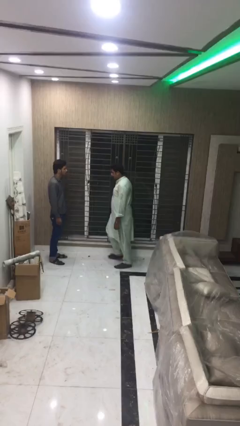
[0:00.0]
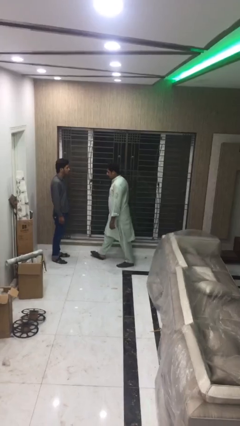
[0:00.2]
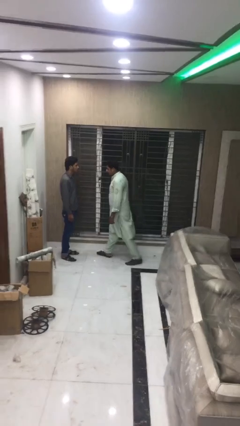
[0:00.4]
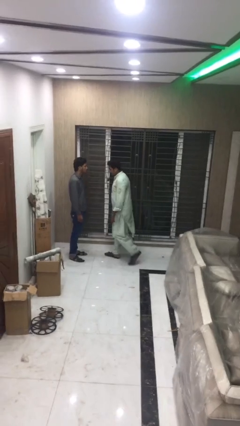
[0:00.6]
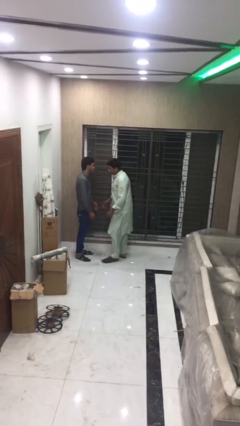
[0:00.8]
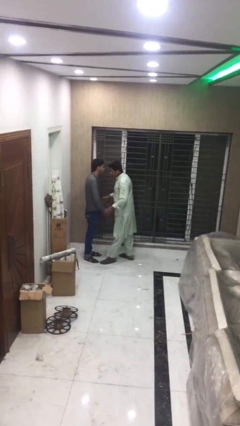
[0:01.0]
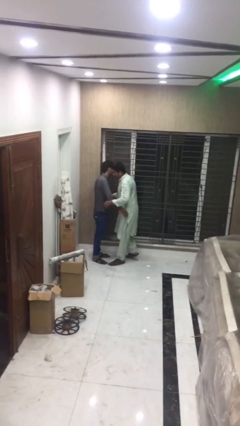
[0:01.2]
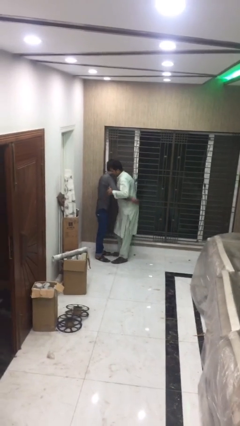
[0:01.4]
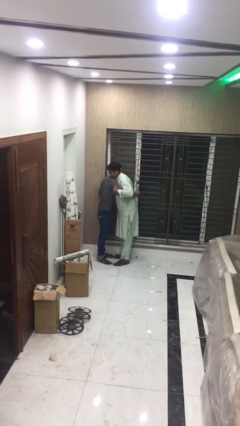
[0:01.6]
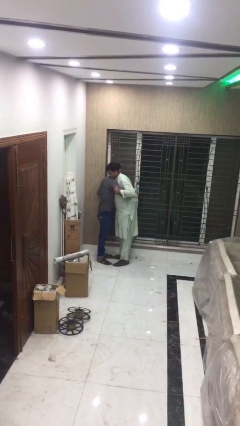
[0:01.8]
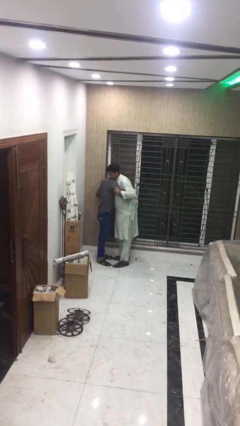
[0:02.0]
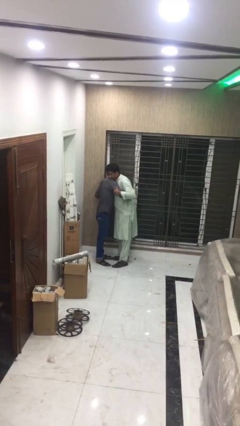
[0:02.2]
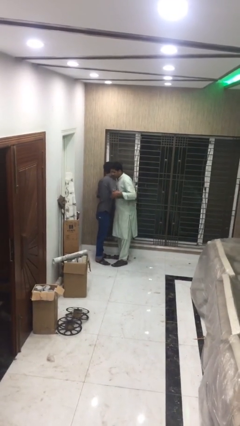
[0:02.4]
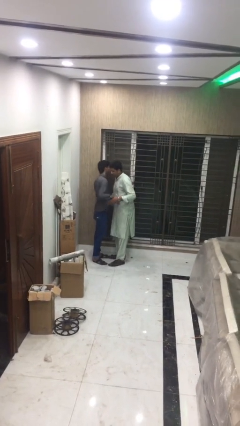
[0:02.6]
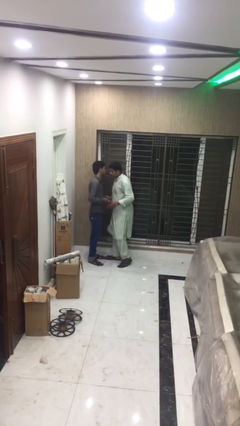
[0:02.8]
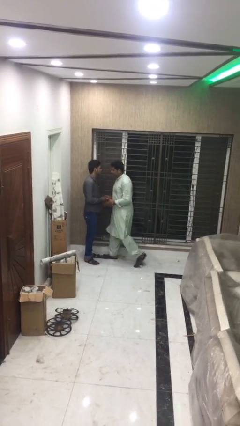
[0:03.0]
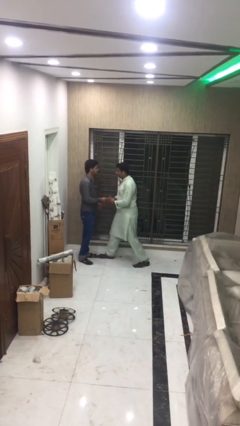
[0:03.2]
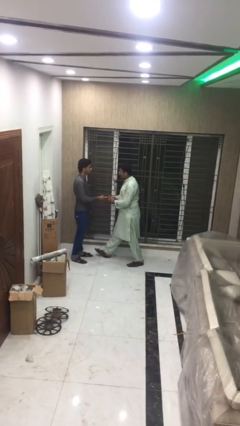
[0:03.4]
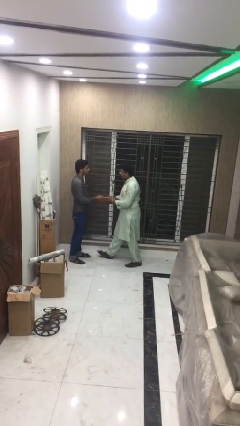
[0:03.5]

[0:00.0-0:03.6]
person embraces person

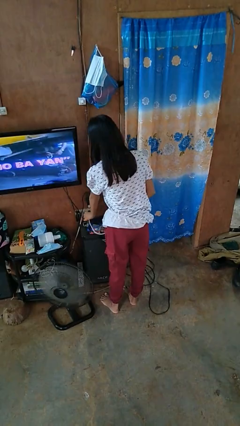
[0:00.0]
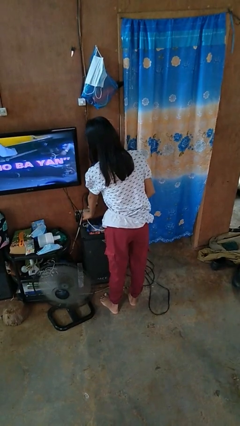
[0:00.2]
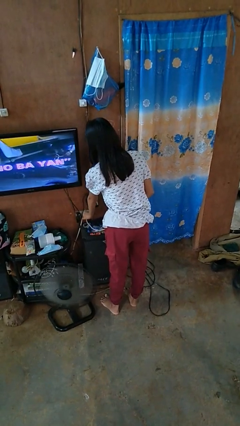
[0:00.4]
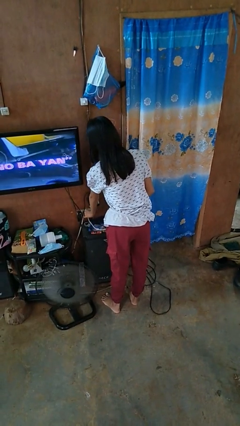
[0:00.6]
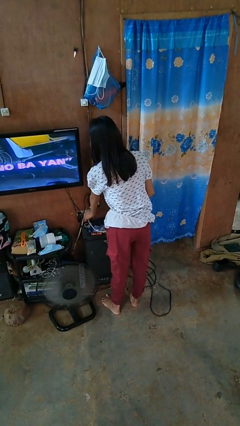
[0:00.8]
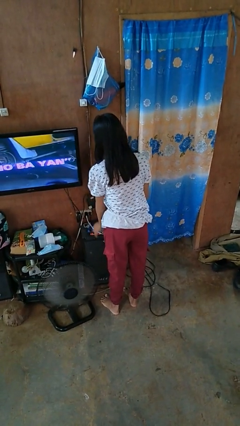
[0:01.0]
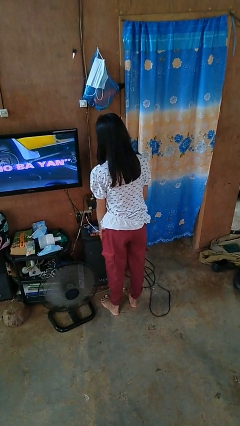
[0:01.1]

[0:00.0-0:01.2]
person plugs into electrical socket

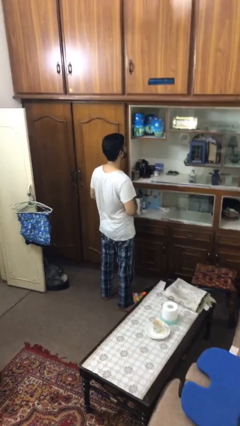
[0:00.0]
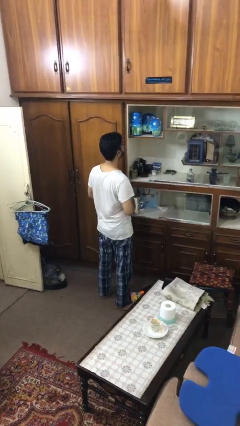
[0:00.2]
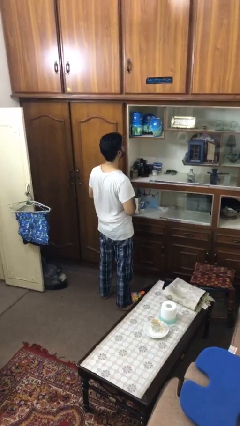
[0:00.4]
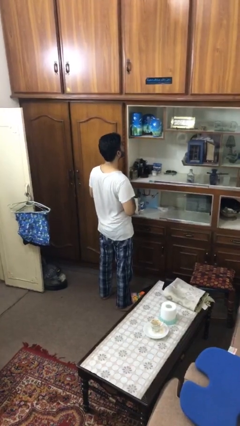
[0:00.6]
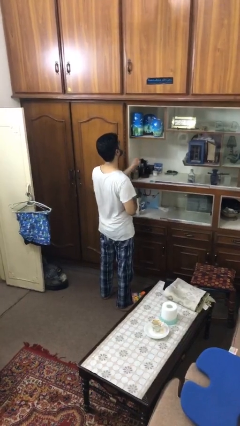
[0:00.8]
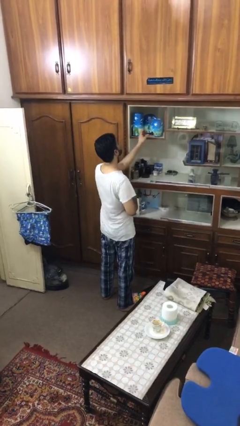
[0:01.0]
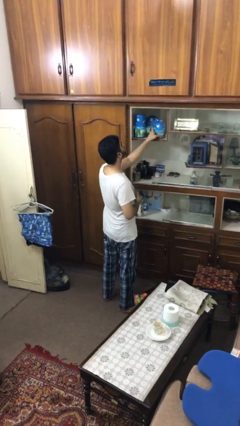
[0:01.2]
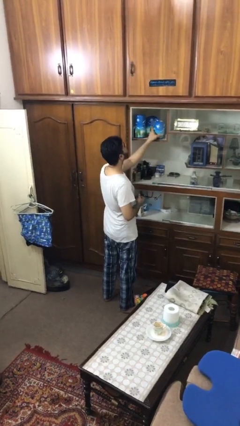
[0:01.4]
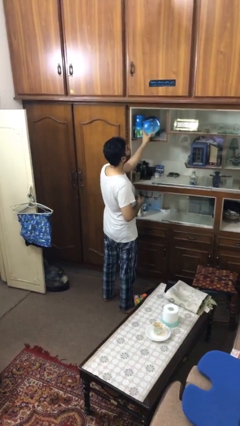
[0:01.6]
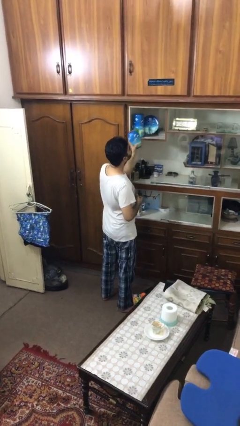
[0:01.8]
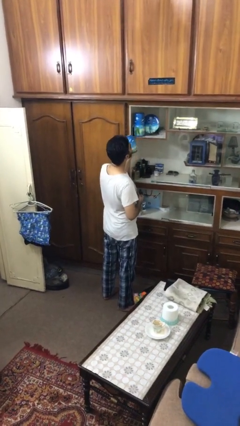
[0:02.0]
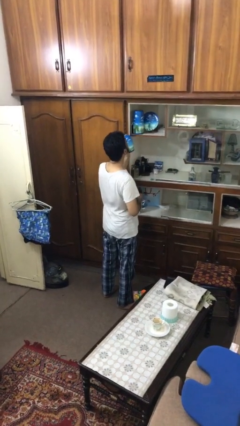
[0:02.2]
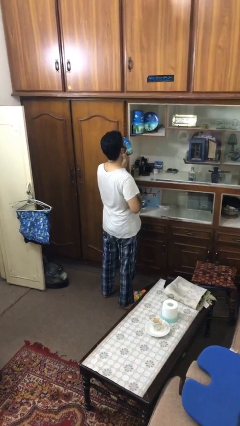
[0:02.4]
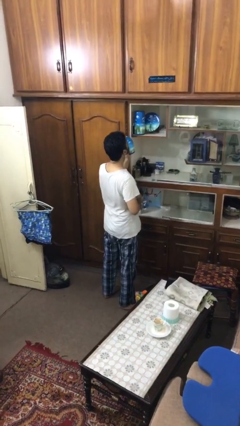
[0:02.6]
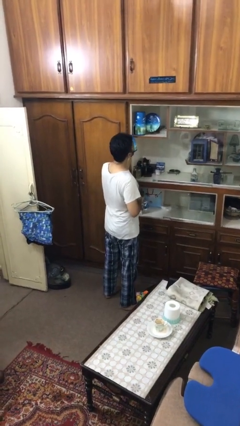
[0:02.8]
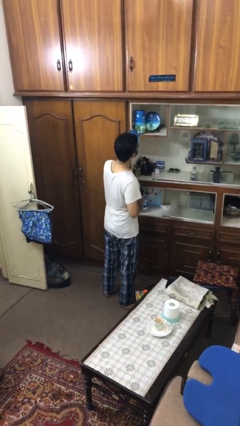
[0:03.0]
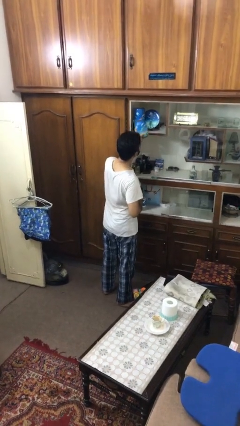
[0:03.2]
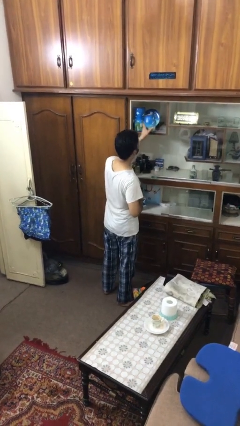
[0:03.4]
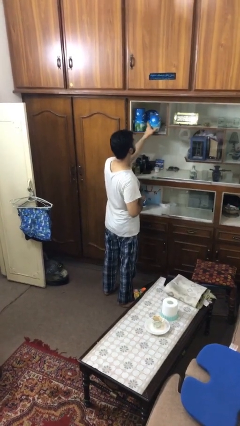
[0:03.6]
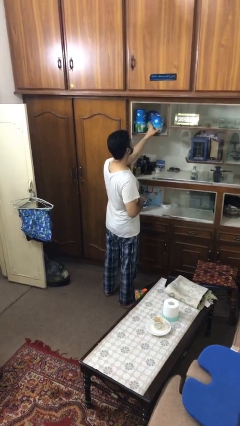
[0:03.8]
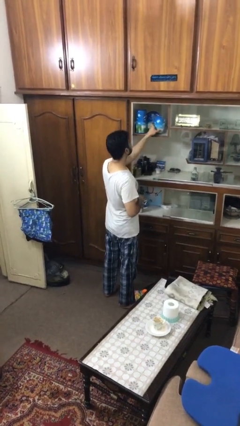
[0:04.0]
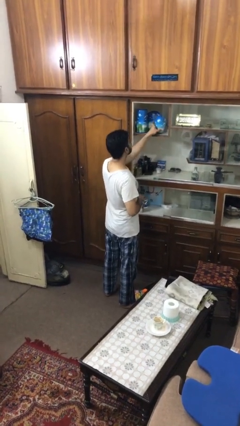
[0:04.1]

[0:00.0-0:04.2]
person searches in cabinet

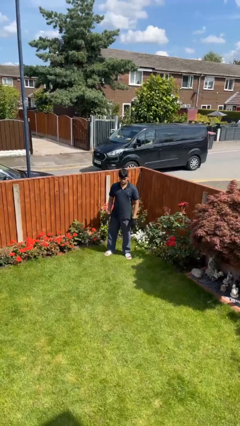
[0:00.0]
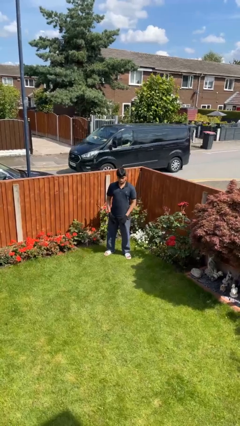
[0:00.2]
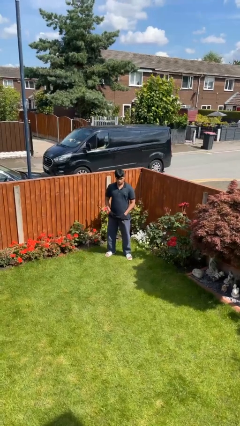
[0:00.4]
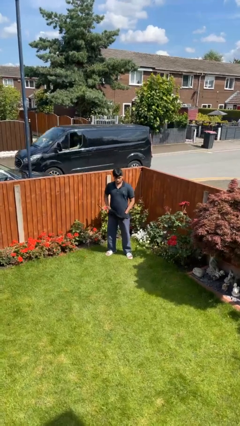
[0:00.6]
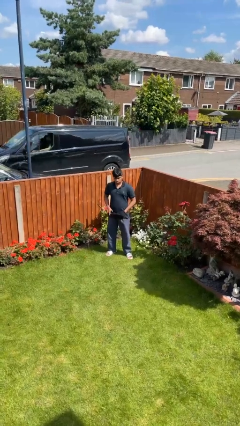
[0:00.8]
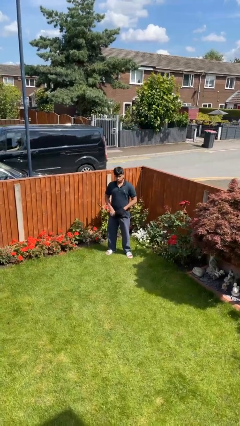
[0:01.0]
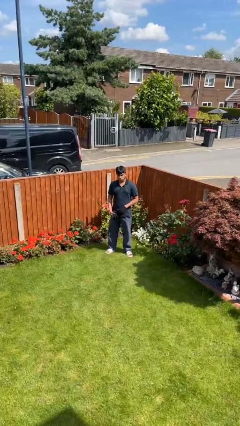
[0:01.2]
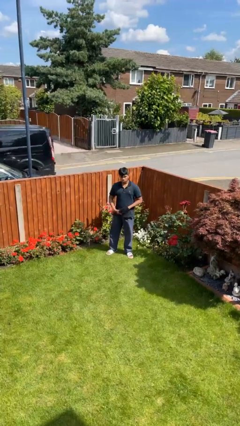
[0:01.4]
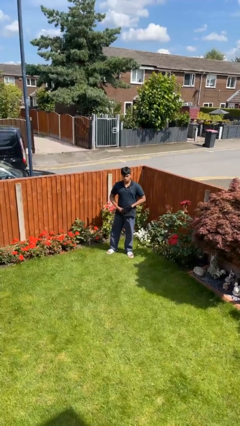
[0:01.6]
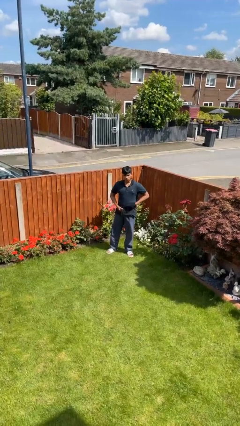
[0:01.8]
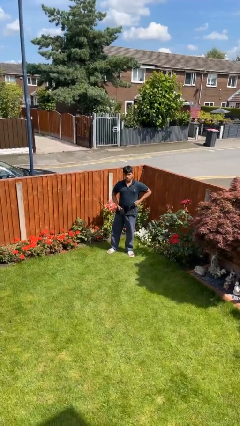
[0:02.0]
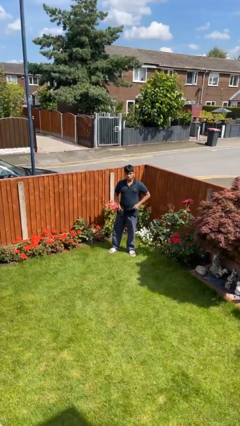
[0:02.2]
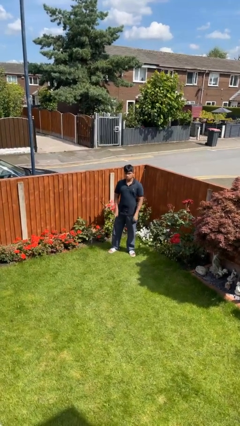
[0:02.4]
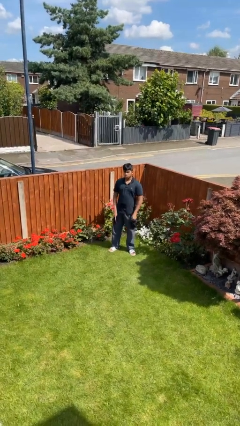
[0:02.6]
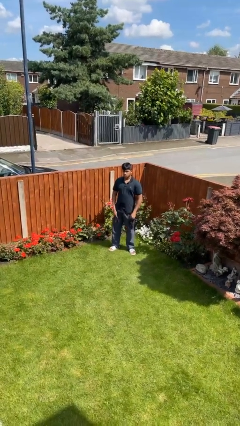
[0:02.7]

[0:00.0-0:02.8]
person takes off gloves

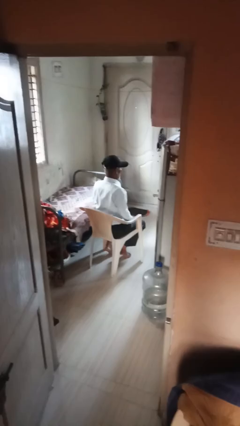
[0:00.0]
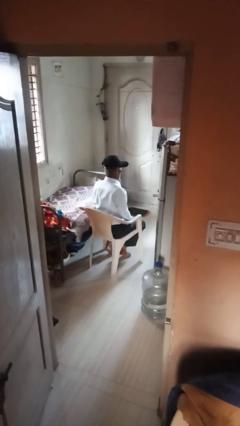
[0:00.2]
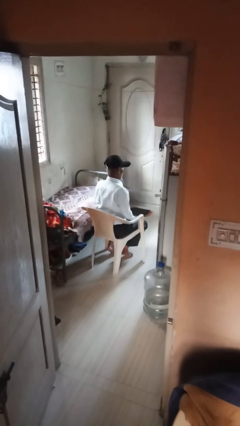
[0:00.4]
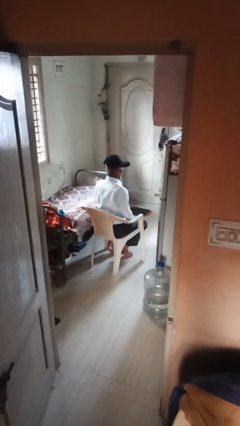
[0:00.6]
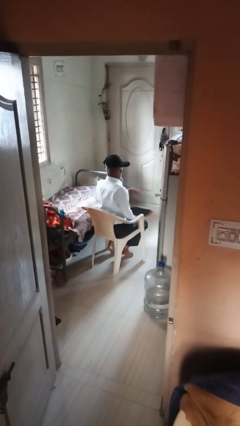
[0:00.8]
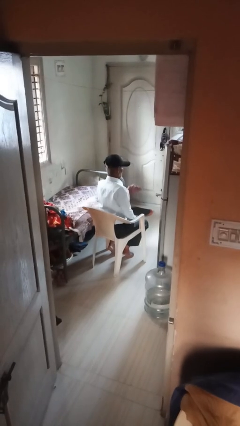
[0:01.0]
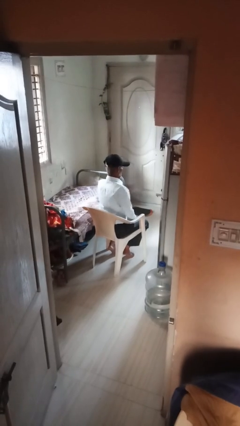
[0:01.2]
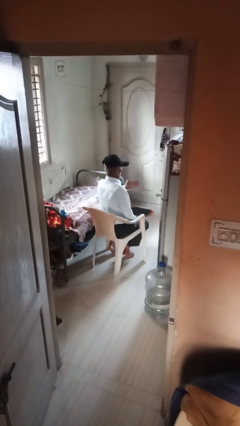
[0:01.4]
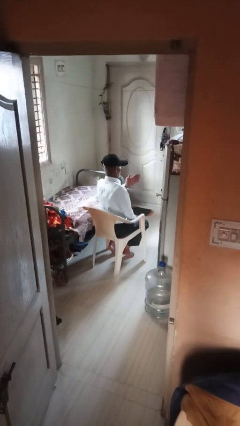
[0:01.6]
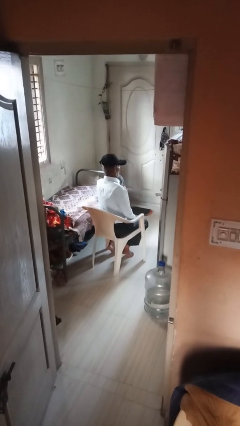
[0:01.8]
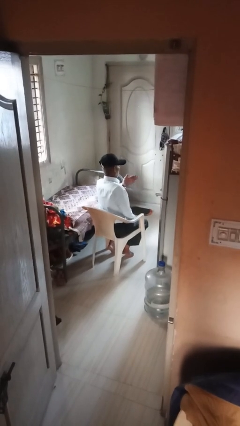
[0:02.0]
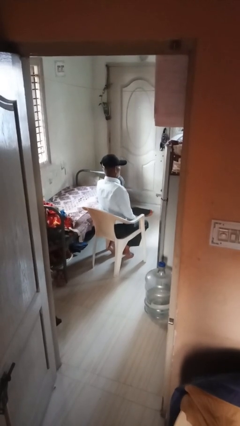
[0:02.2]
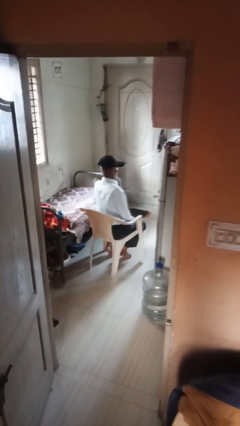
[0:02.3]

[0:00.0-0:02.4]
person drums on chest

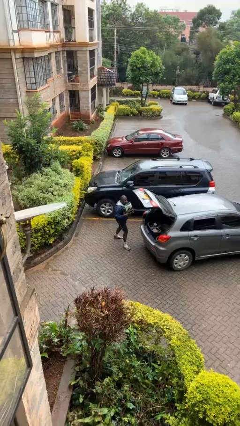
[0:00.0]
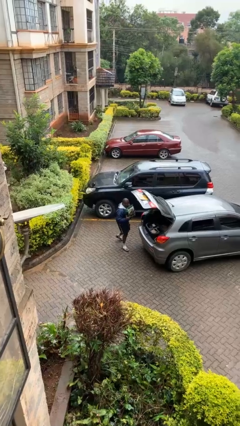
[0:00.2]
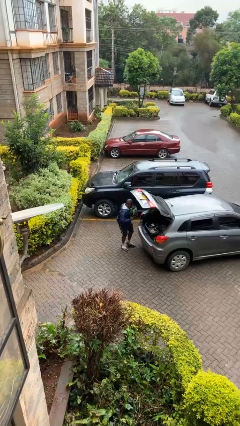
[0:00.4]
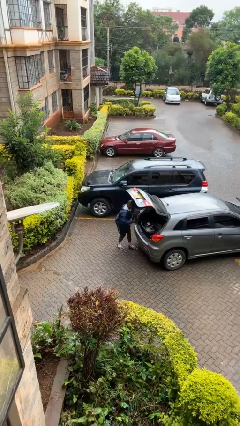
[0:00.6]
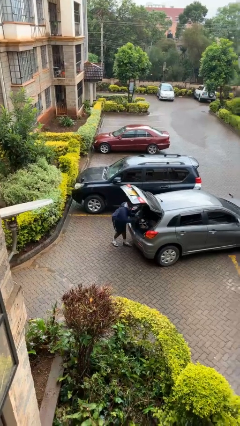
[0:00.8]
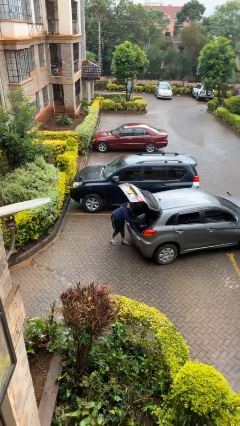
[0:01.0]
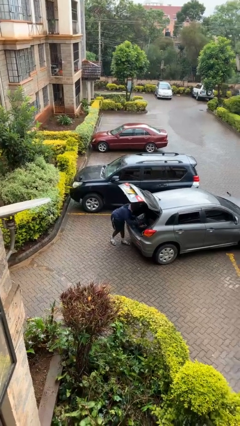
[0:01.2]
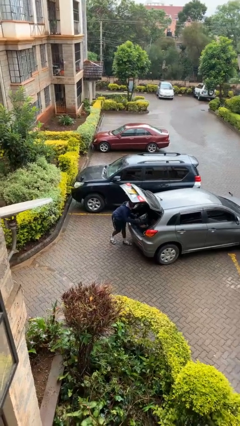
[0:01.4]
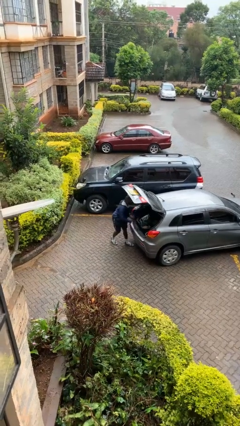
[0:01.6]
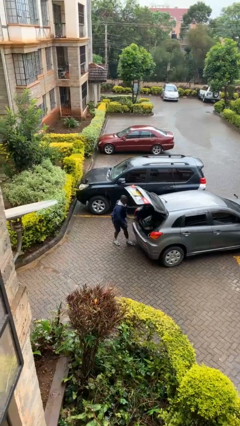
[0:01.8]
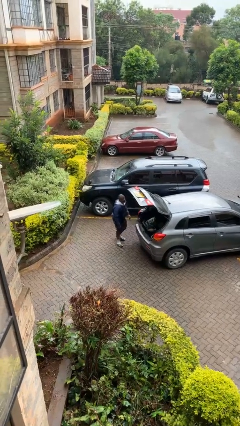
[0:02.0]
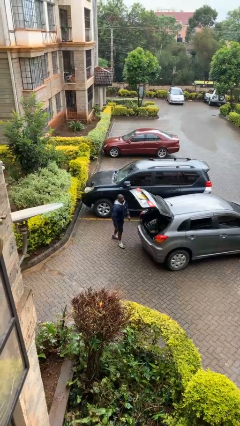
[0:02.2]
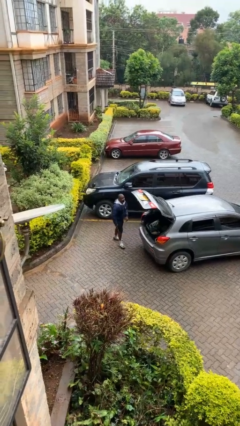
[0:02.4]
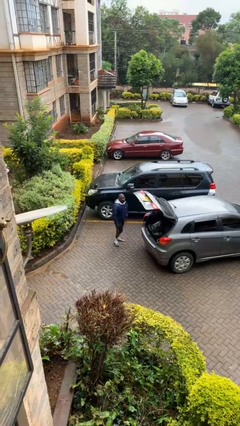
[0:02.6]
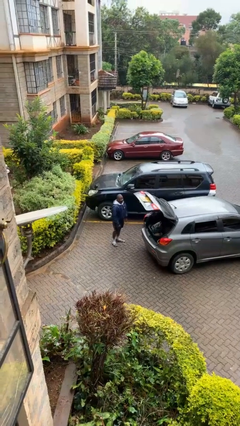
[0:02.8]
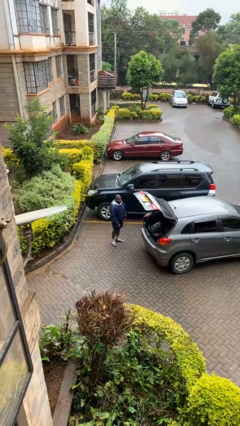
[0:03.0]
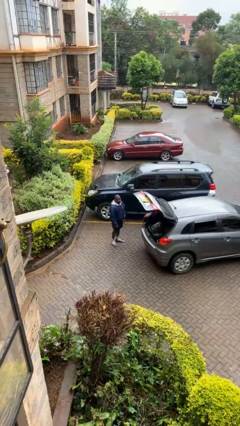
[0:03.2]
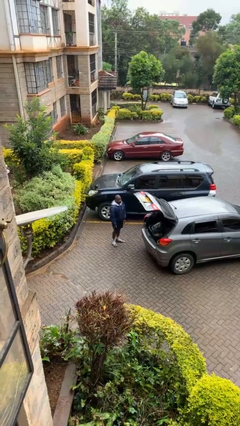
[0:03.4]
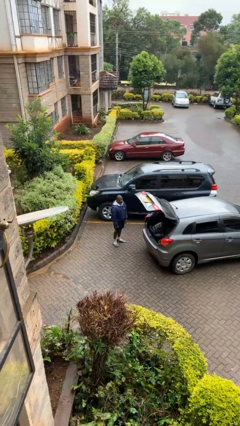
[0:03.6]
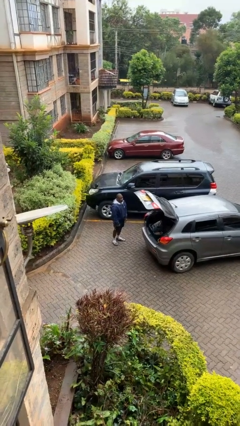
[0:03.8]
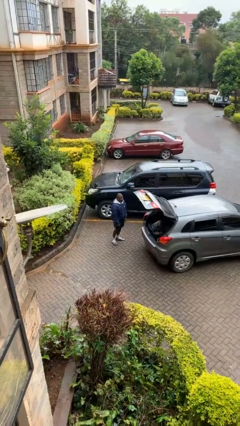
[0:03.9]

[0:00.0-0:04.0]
person loads car
